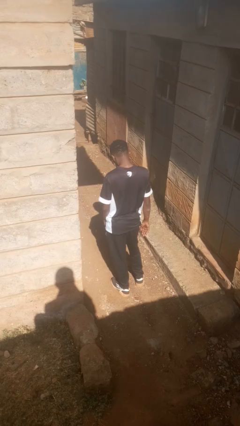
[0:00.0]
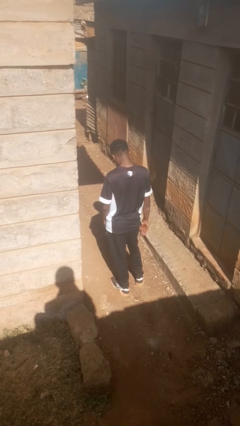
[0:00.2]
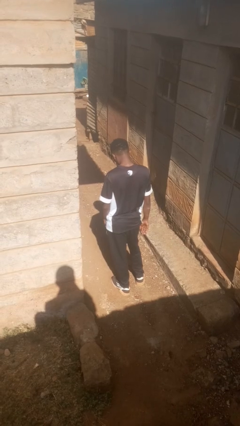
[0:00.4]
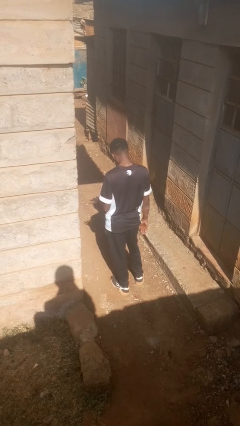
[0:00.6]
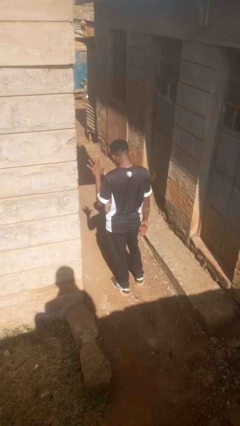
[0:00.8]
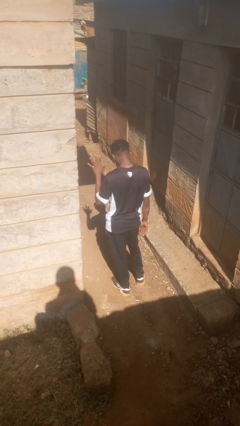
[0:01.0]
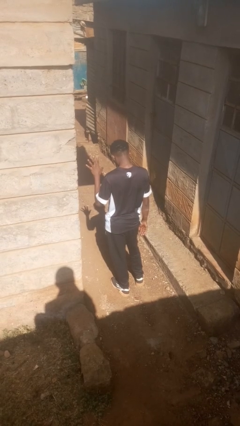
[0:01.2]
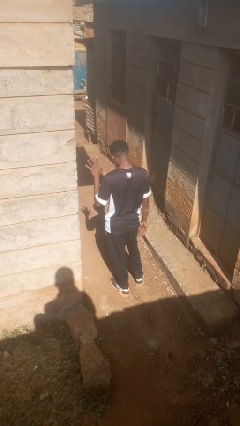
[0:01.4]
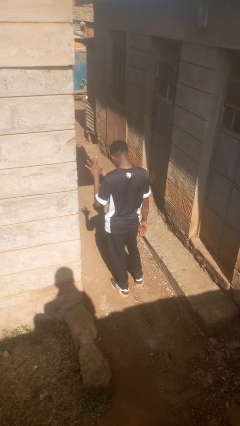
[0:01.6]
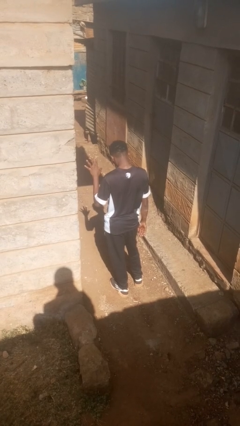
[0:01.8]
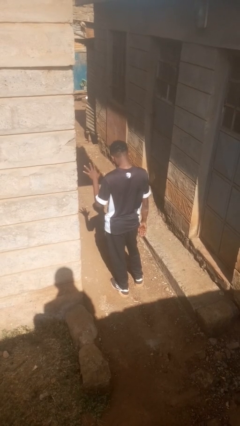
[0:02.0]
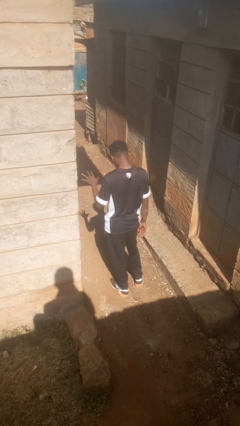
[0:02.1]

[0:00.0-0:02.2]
person gestures number five

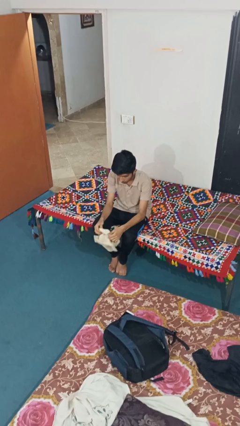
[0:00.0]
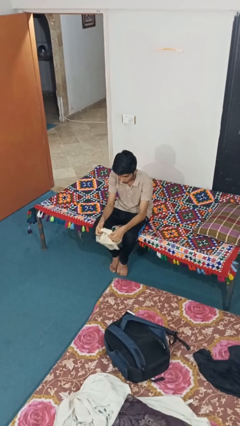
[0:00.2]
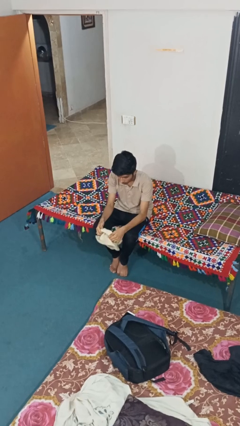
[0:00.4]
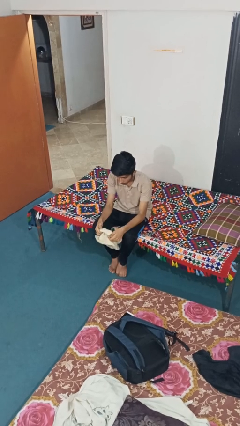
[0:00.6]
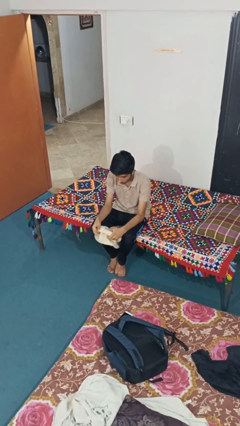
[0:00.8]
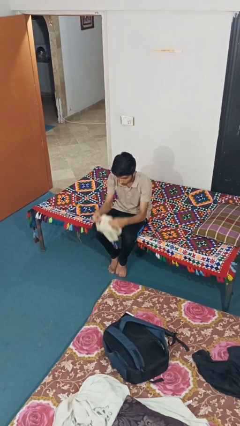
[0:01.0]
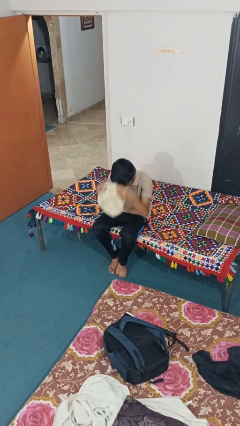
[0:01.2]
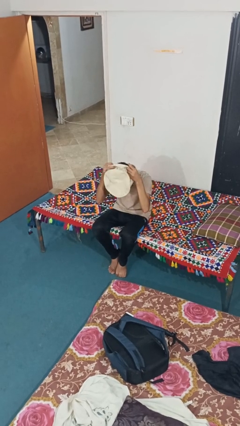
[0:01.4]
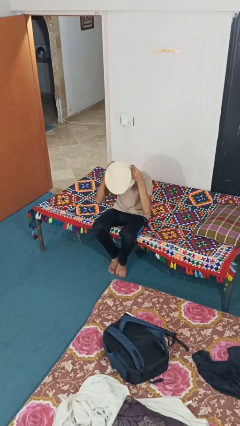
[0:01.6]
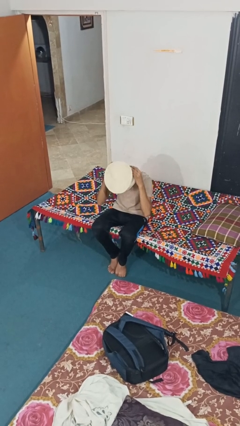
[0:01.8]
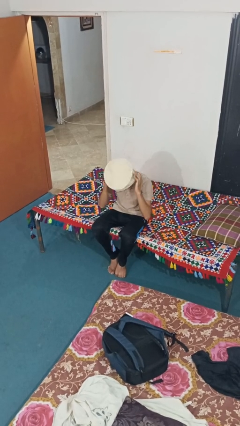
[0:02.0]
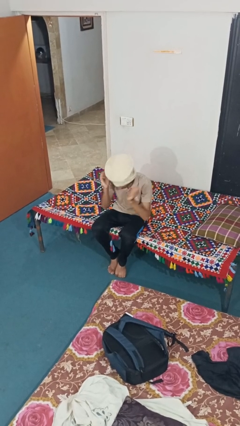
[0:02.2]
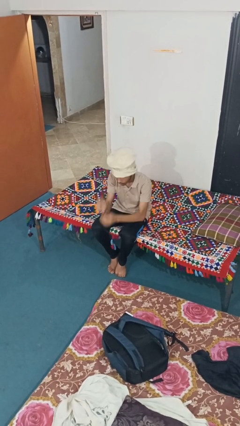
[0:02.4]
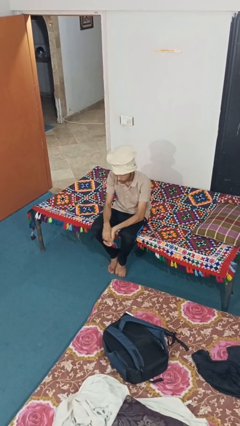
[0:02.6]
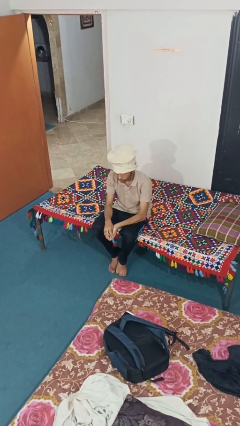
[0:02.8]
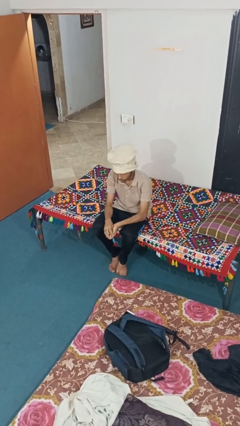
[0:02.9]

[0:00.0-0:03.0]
person puts on hat

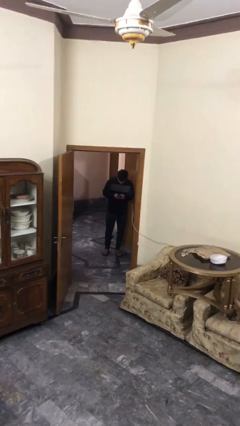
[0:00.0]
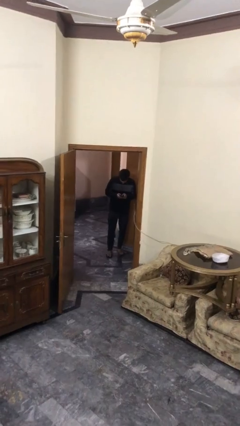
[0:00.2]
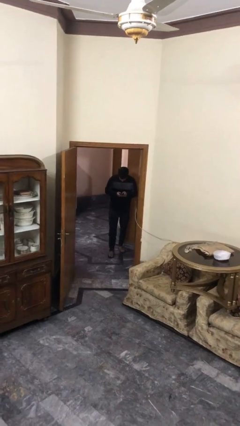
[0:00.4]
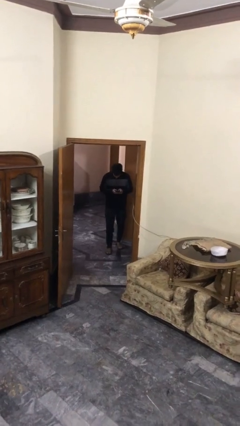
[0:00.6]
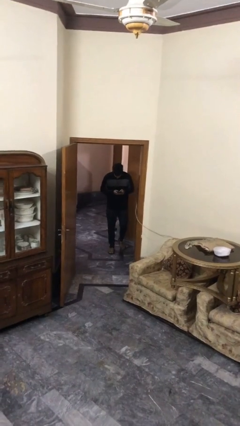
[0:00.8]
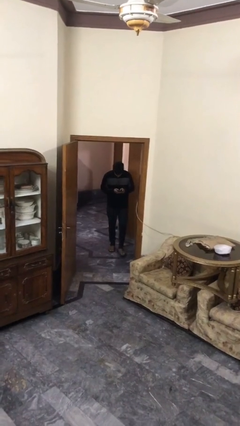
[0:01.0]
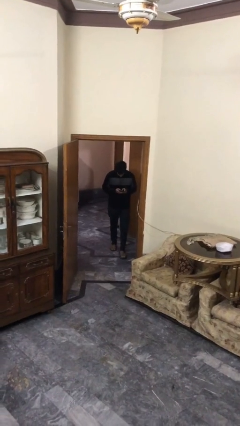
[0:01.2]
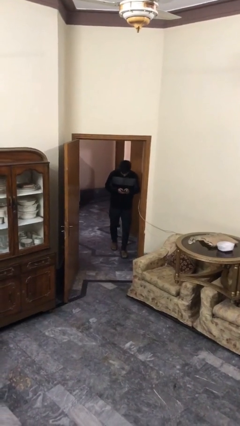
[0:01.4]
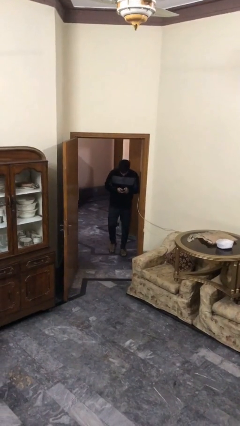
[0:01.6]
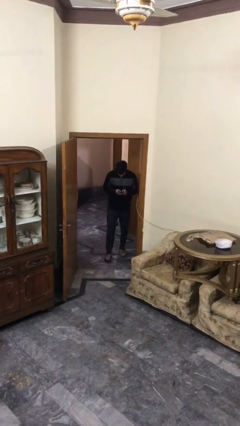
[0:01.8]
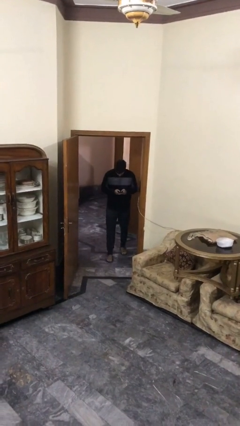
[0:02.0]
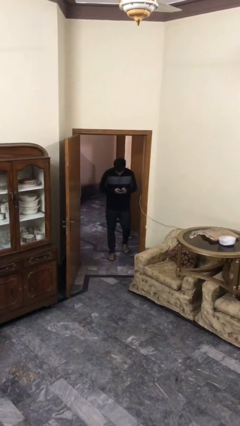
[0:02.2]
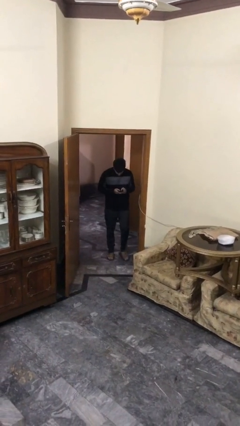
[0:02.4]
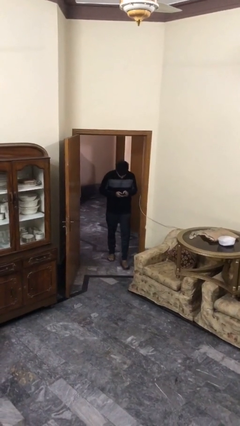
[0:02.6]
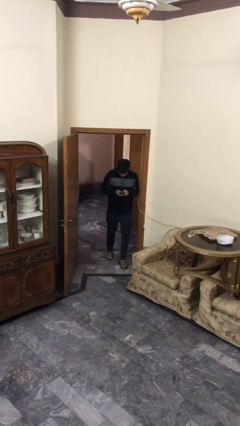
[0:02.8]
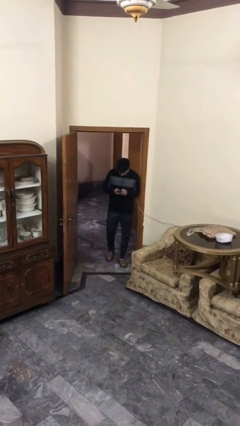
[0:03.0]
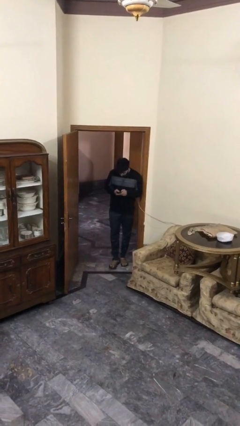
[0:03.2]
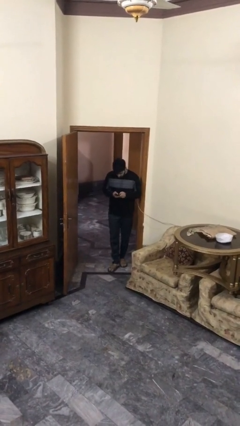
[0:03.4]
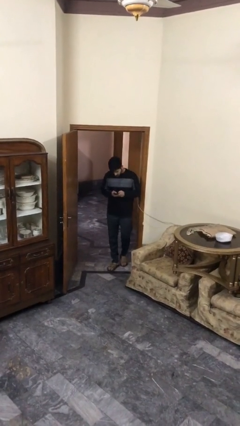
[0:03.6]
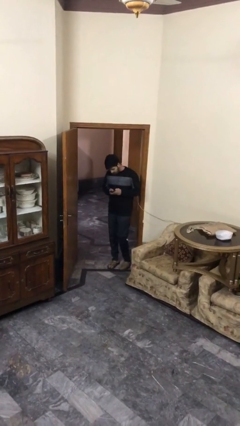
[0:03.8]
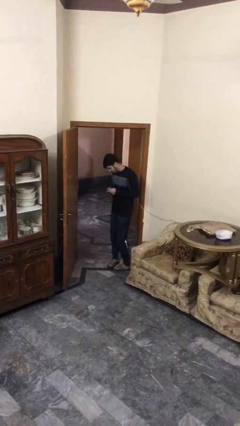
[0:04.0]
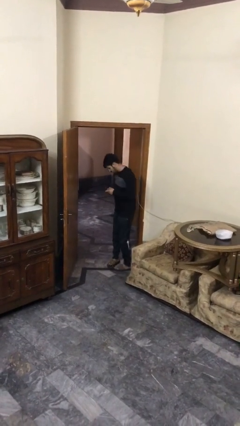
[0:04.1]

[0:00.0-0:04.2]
person enters scene through structure

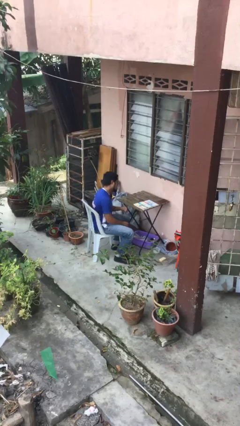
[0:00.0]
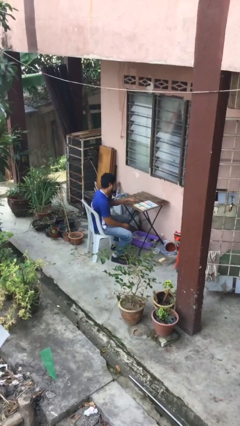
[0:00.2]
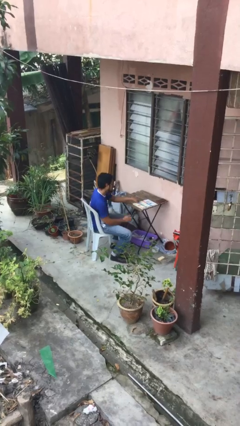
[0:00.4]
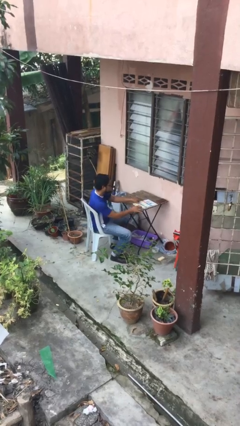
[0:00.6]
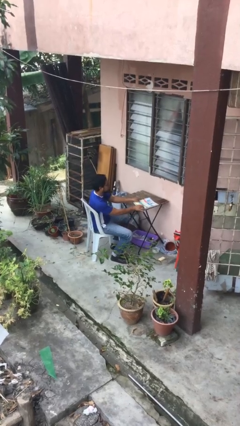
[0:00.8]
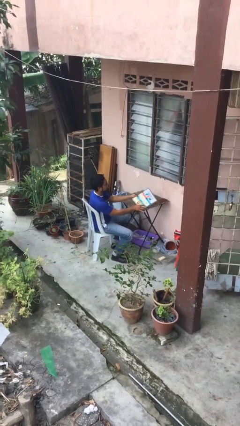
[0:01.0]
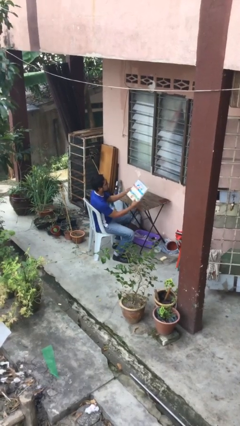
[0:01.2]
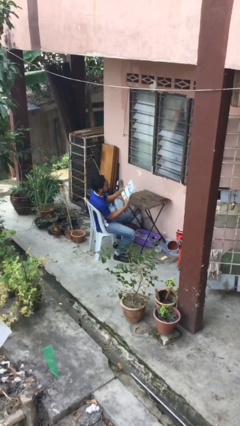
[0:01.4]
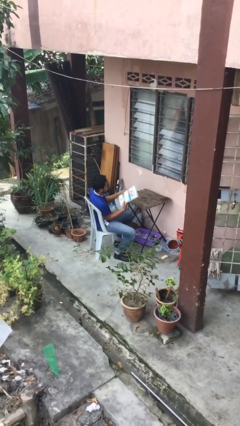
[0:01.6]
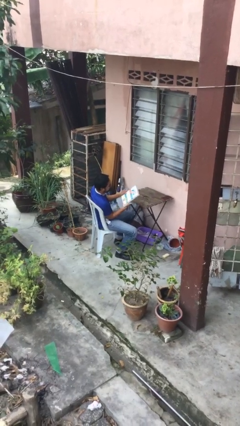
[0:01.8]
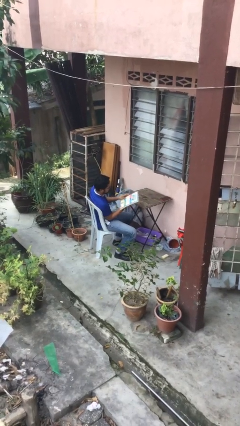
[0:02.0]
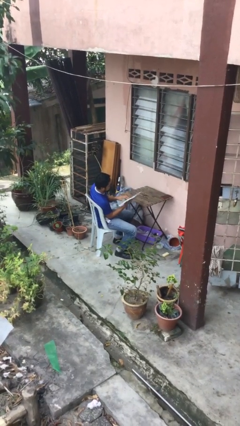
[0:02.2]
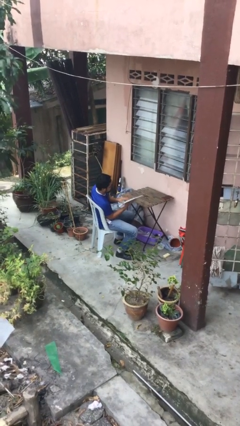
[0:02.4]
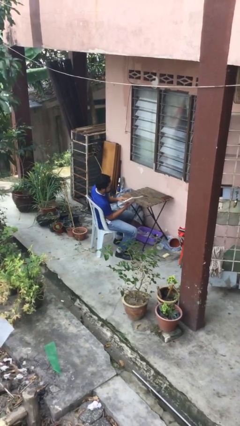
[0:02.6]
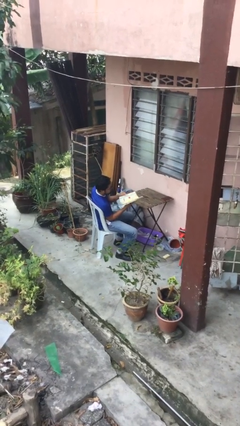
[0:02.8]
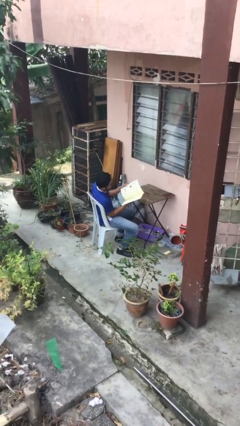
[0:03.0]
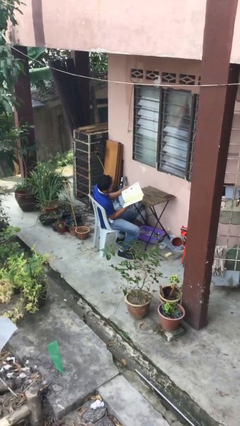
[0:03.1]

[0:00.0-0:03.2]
person picks up object from table

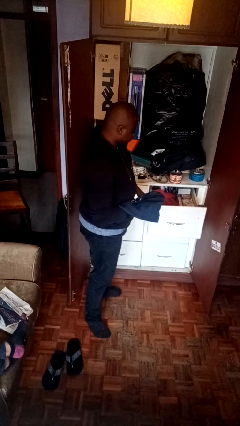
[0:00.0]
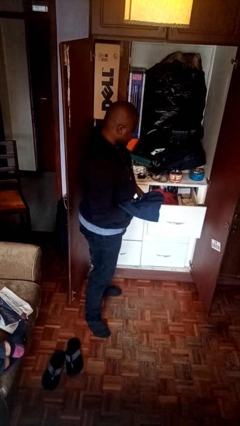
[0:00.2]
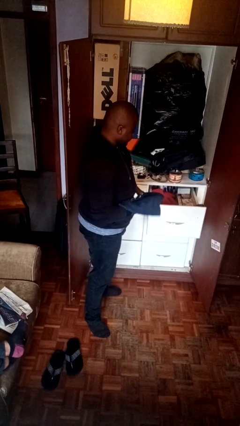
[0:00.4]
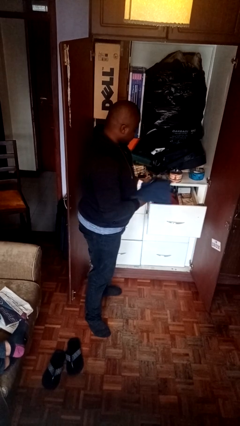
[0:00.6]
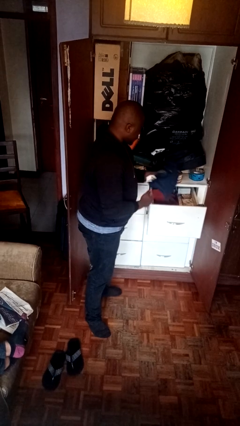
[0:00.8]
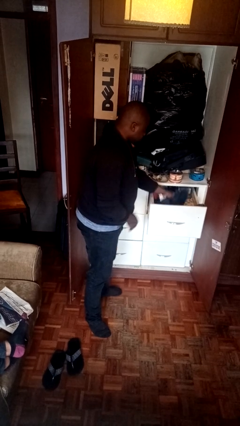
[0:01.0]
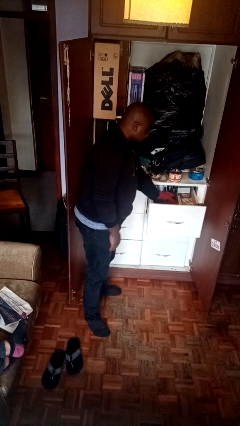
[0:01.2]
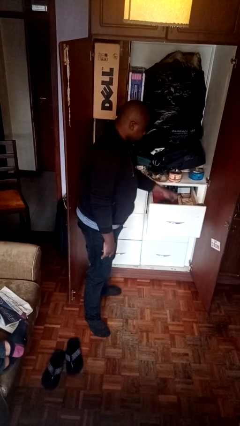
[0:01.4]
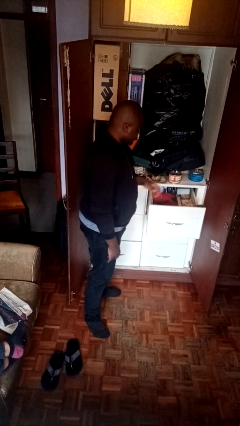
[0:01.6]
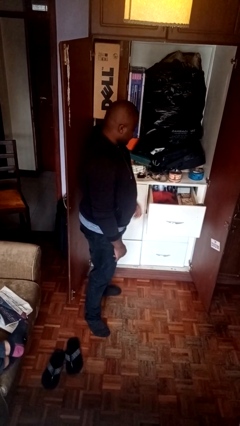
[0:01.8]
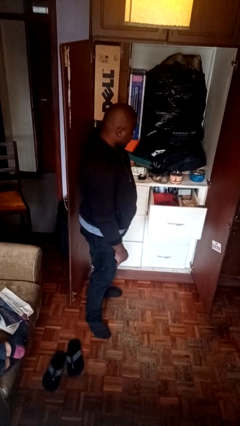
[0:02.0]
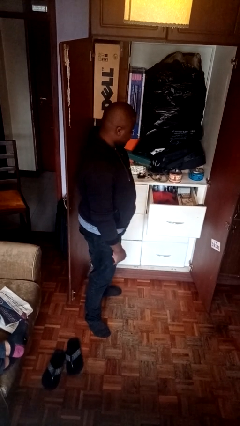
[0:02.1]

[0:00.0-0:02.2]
person puts clothes into dresser

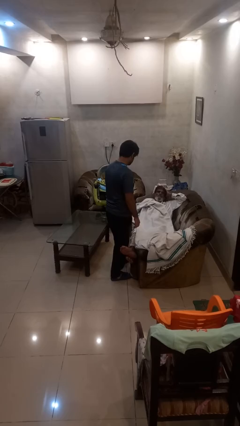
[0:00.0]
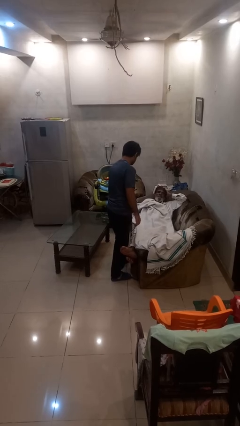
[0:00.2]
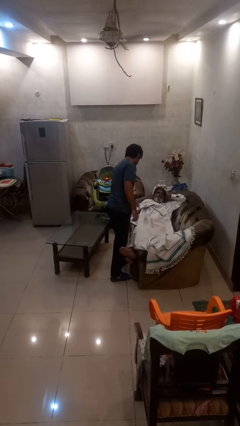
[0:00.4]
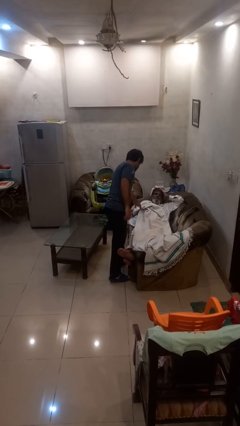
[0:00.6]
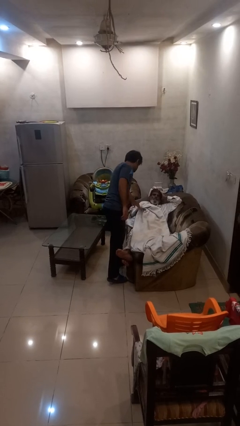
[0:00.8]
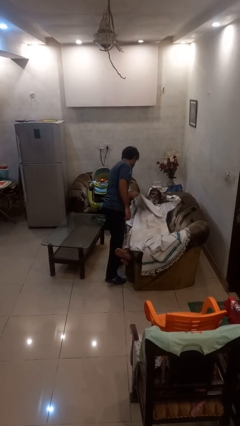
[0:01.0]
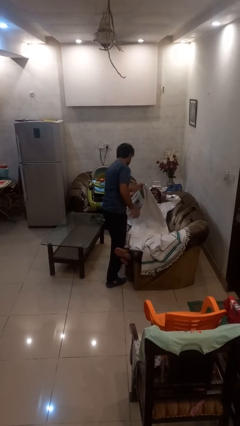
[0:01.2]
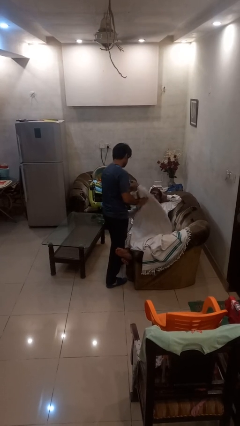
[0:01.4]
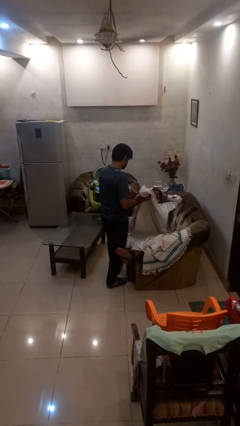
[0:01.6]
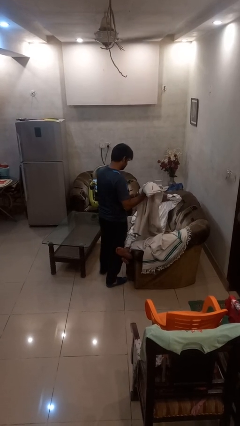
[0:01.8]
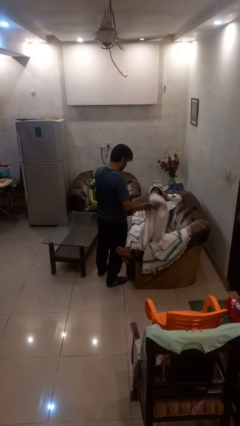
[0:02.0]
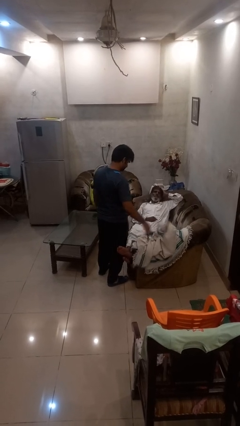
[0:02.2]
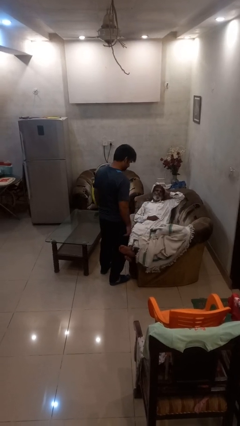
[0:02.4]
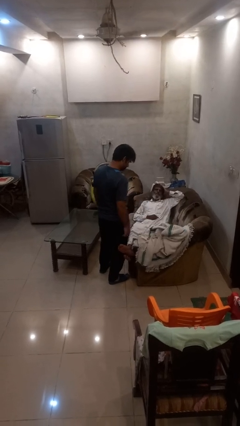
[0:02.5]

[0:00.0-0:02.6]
person uncovers friend with blanket
